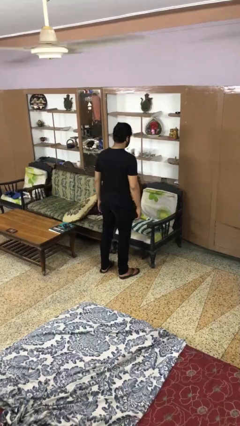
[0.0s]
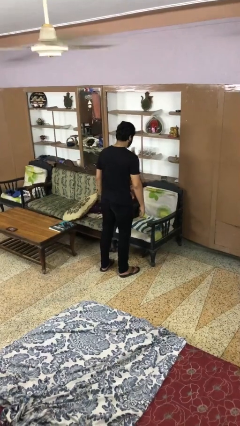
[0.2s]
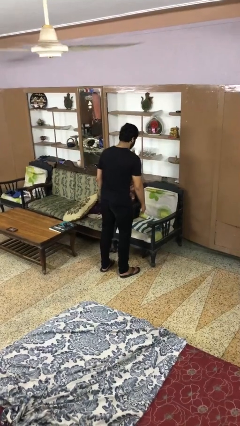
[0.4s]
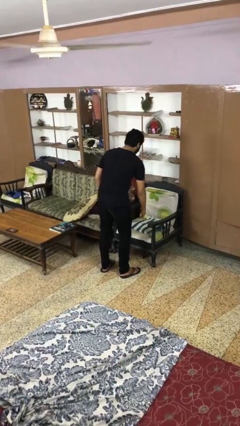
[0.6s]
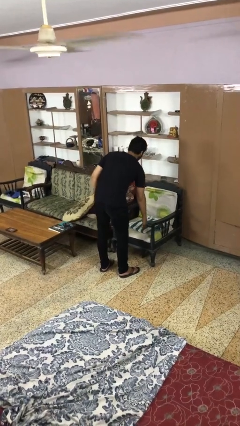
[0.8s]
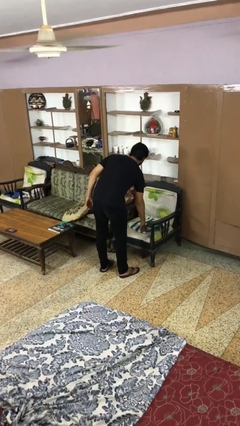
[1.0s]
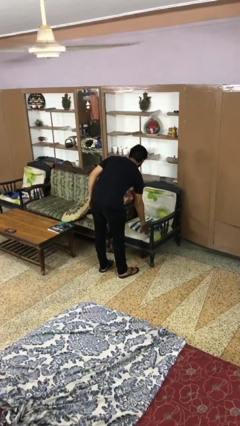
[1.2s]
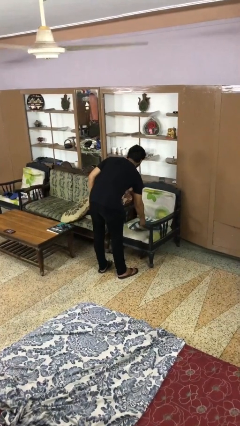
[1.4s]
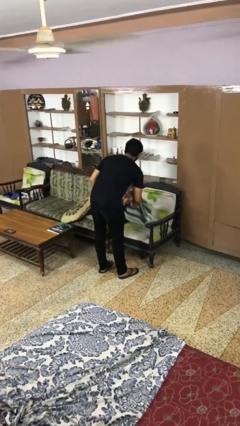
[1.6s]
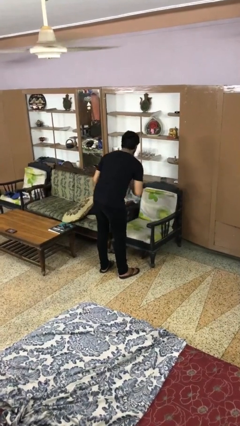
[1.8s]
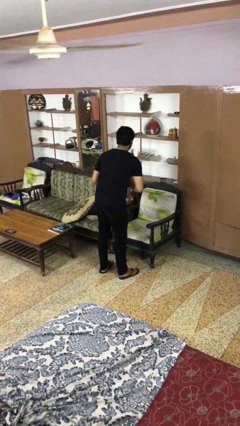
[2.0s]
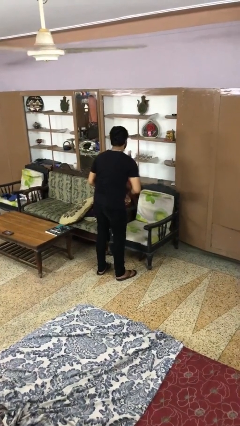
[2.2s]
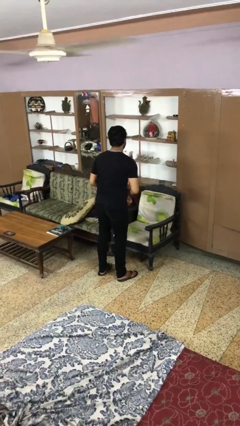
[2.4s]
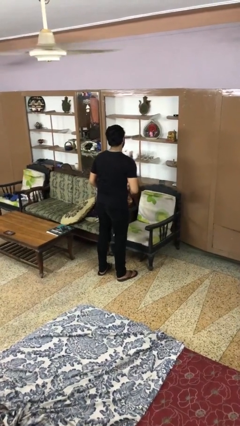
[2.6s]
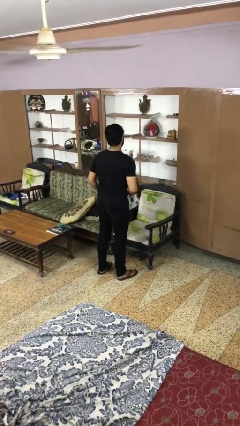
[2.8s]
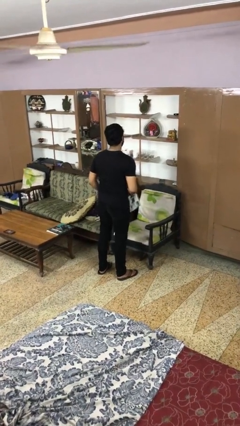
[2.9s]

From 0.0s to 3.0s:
person picks up object from couch

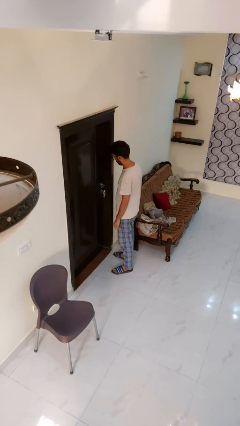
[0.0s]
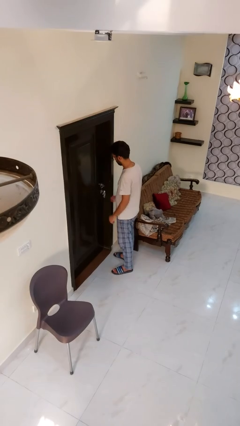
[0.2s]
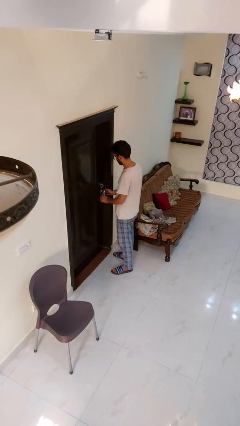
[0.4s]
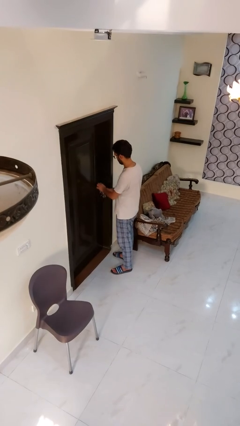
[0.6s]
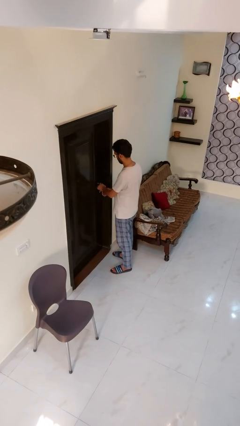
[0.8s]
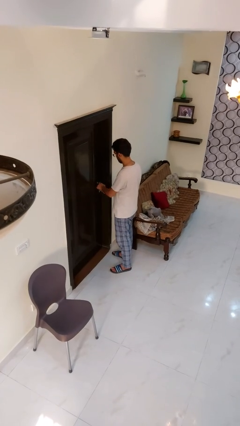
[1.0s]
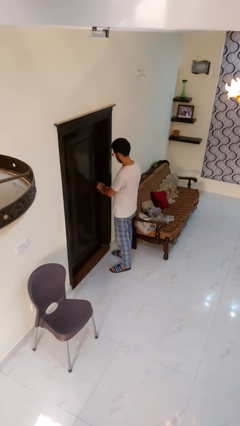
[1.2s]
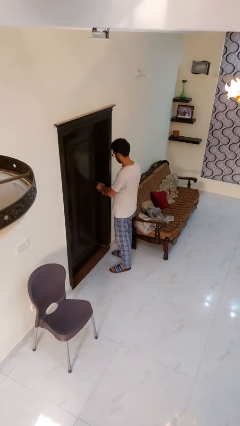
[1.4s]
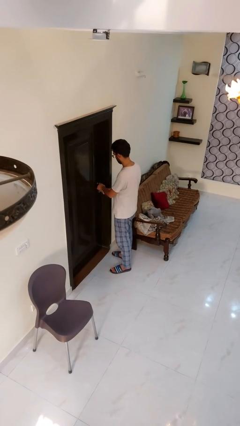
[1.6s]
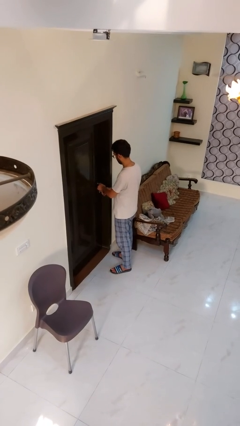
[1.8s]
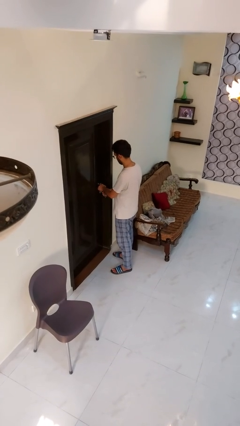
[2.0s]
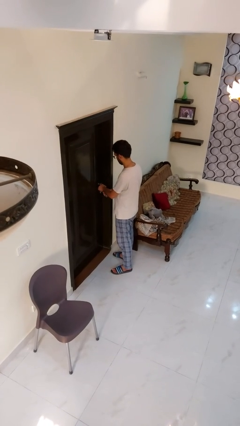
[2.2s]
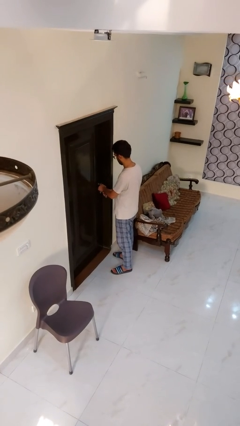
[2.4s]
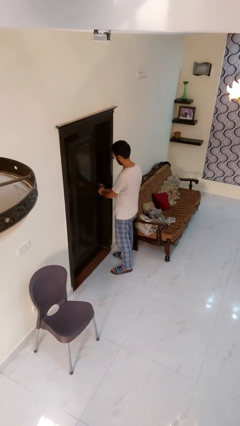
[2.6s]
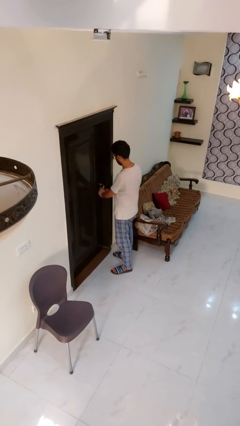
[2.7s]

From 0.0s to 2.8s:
person unlocks door with keys

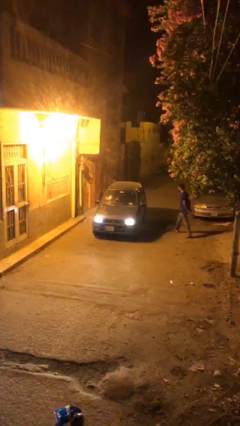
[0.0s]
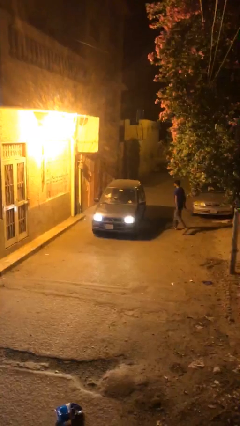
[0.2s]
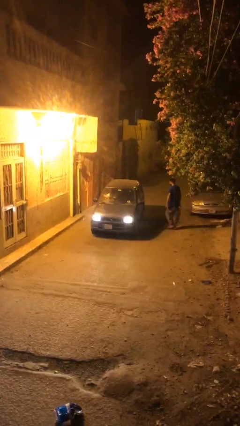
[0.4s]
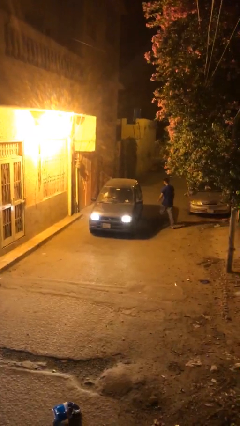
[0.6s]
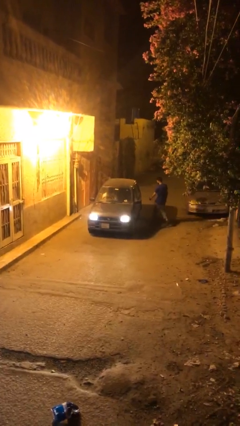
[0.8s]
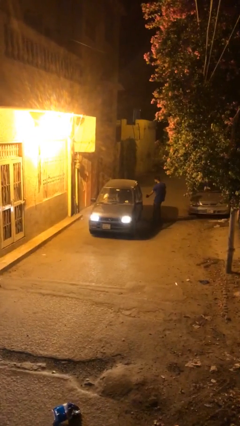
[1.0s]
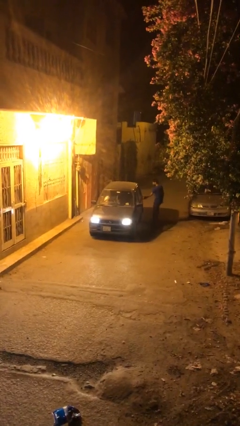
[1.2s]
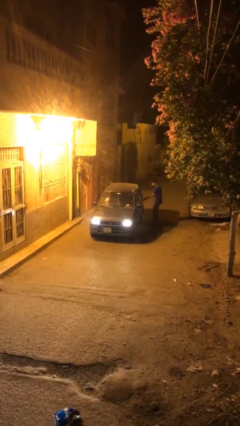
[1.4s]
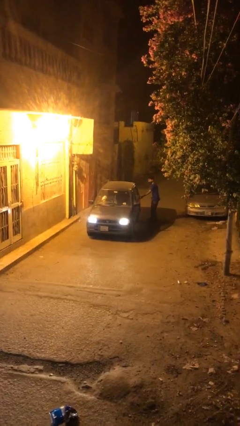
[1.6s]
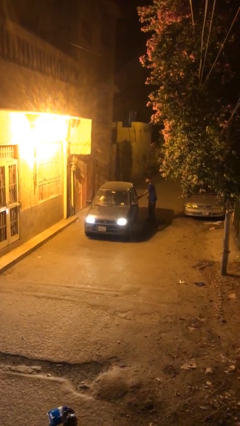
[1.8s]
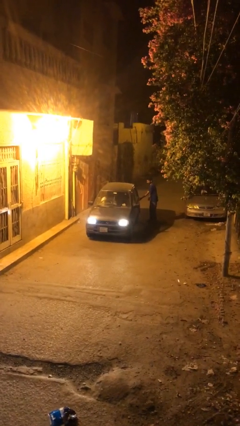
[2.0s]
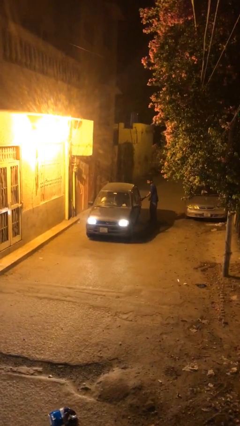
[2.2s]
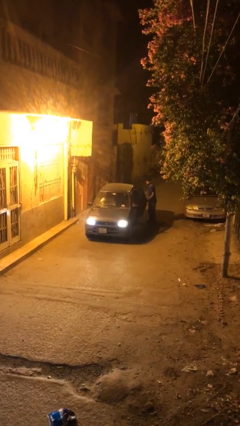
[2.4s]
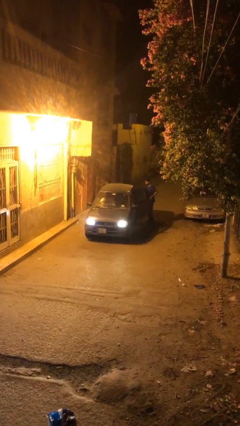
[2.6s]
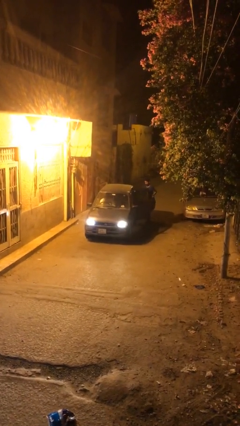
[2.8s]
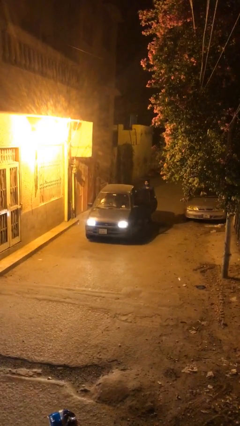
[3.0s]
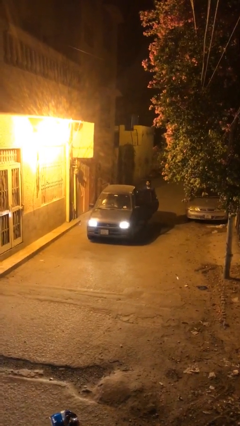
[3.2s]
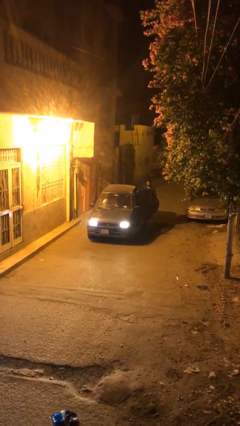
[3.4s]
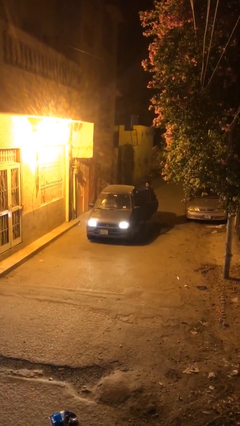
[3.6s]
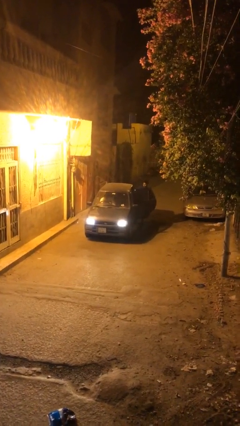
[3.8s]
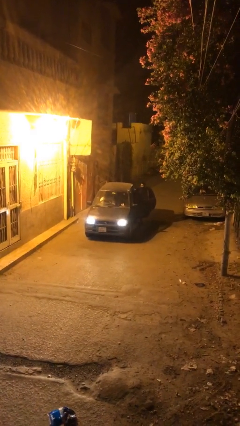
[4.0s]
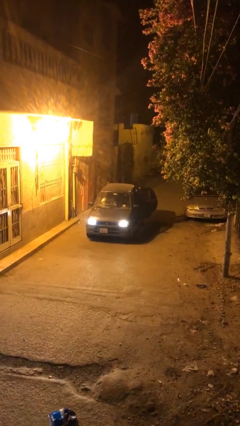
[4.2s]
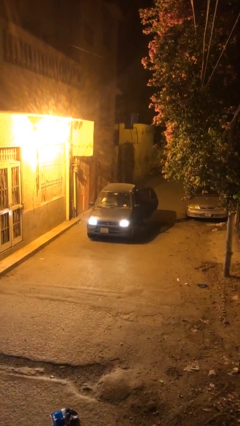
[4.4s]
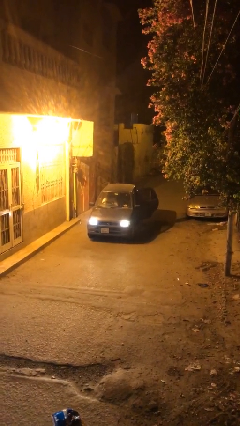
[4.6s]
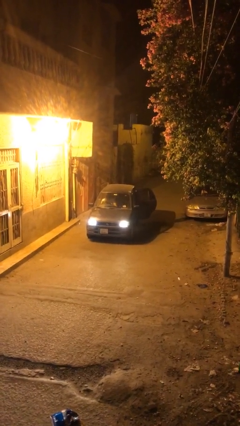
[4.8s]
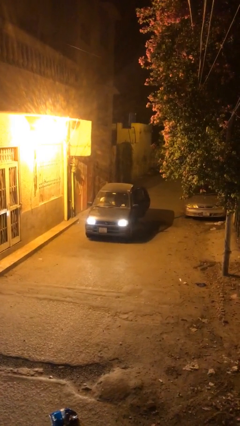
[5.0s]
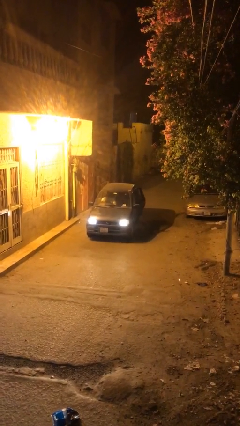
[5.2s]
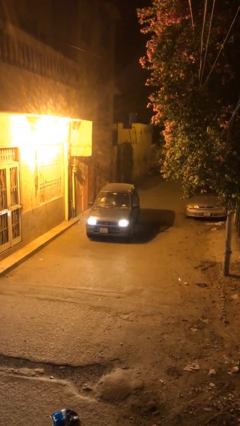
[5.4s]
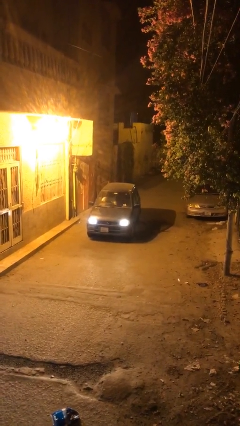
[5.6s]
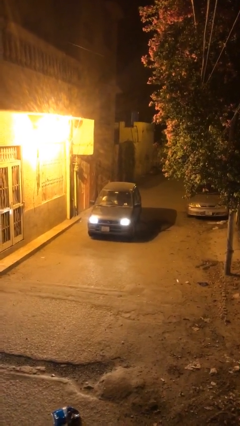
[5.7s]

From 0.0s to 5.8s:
car picks up person

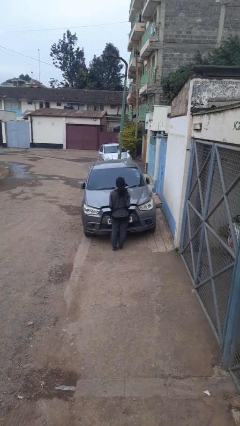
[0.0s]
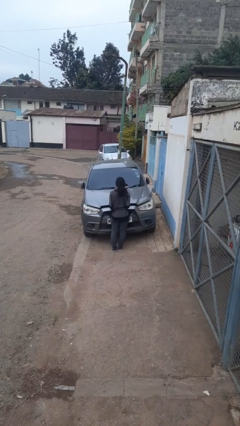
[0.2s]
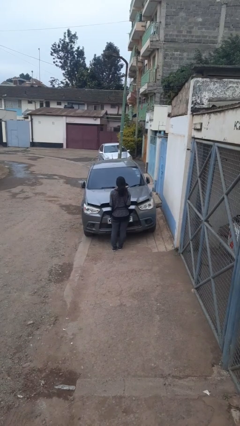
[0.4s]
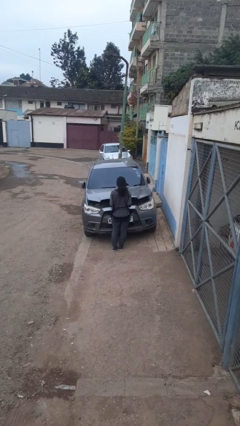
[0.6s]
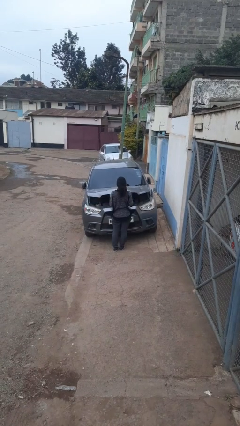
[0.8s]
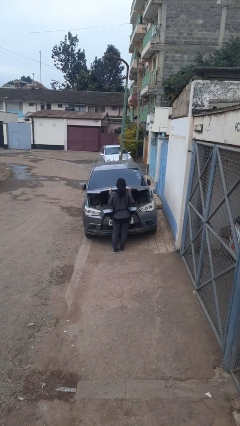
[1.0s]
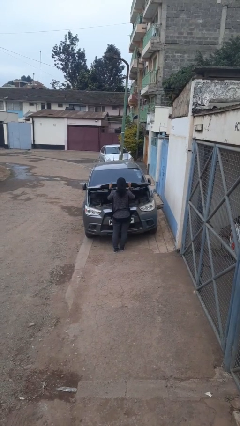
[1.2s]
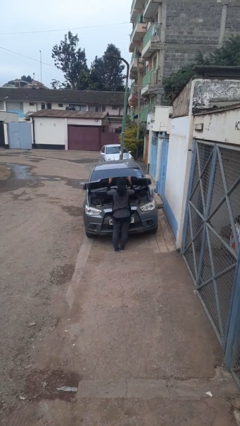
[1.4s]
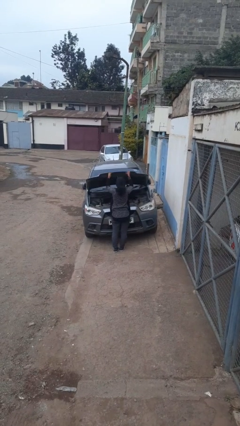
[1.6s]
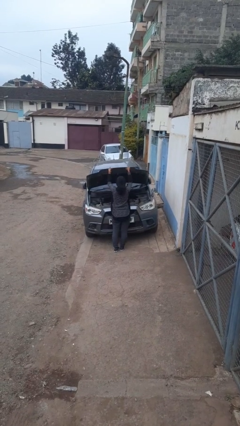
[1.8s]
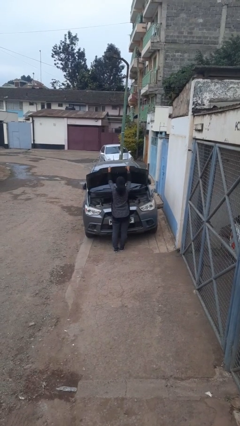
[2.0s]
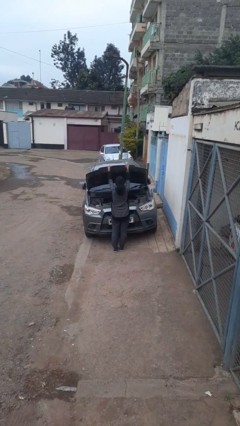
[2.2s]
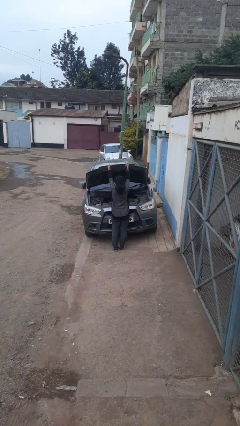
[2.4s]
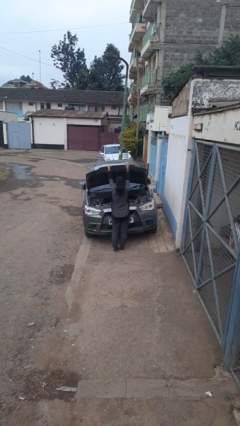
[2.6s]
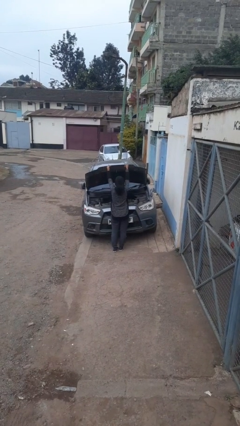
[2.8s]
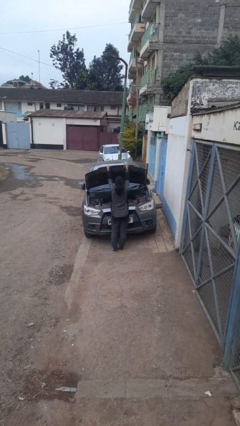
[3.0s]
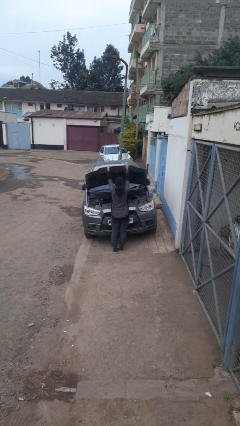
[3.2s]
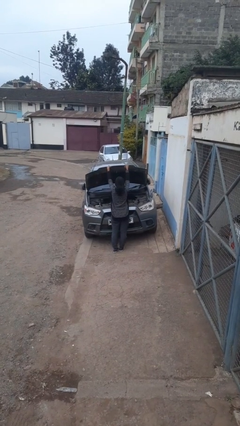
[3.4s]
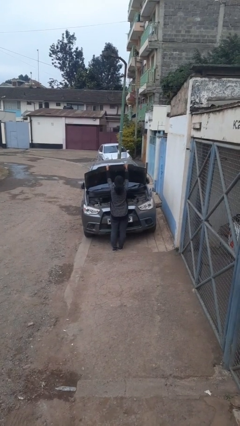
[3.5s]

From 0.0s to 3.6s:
person opens car hood

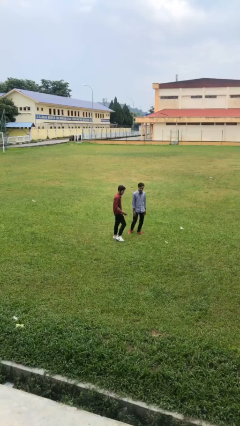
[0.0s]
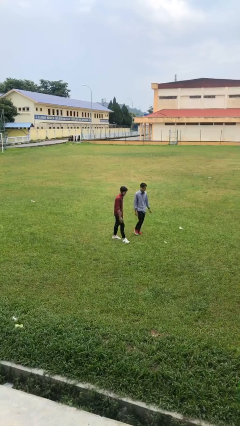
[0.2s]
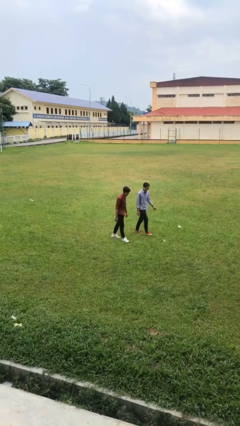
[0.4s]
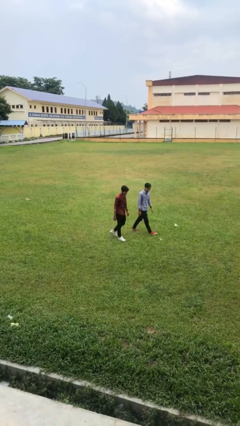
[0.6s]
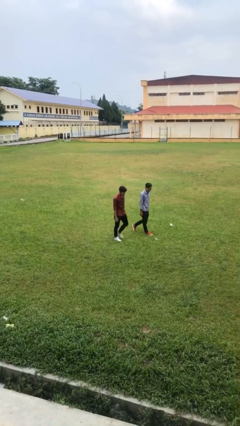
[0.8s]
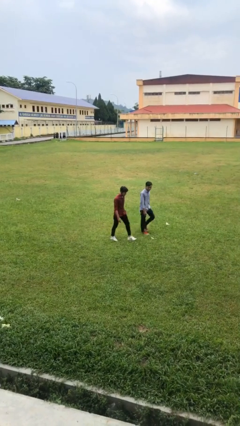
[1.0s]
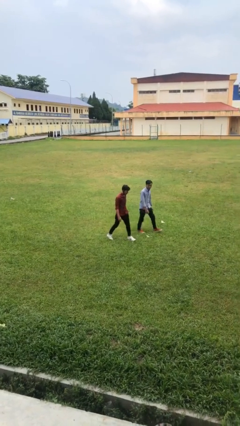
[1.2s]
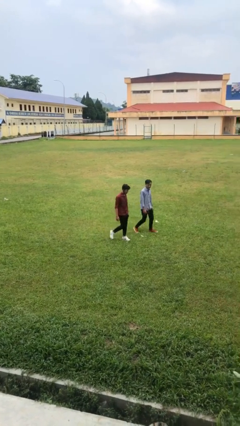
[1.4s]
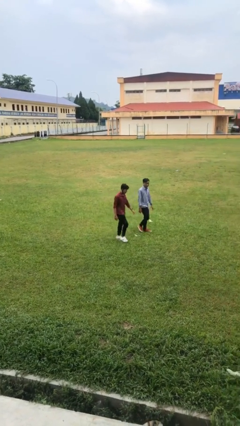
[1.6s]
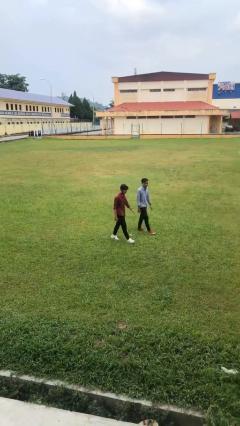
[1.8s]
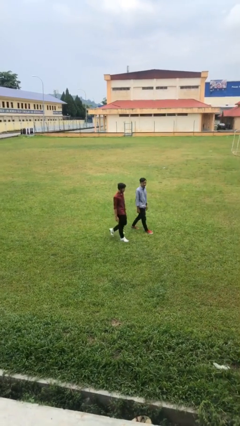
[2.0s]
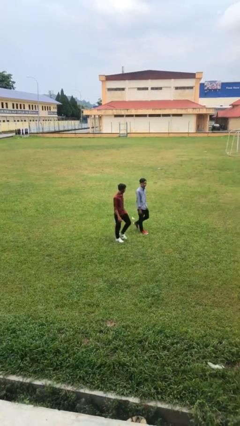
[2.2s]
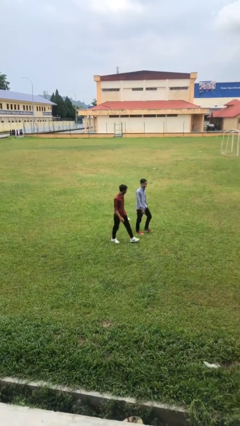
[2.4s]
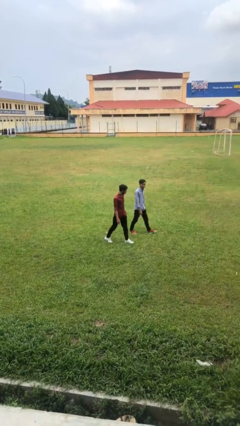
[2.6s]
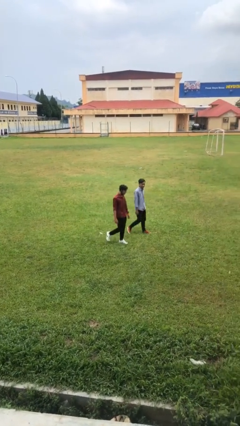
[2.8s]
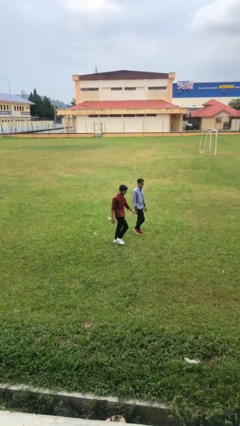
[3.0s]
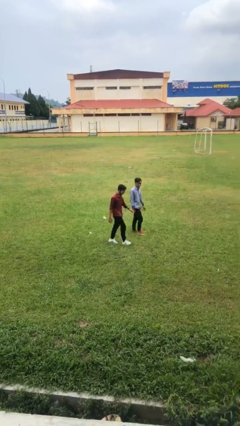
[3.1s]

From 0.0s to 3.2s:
person talks to person
